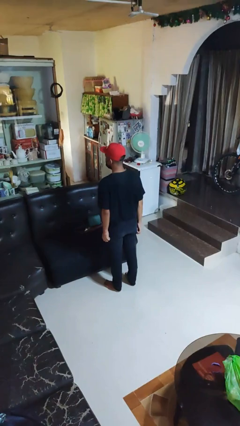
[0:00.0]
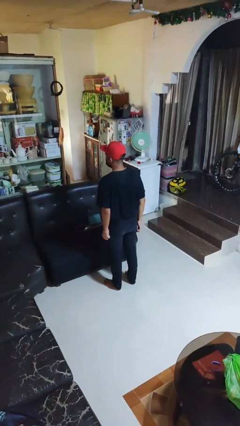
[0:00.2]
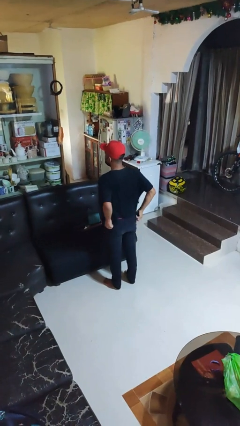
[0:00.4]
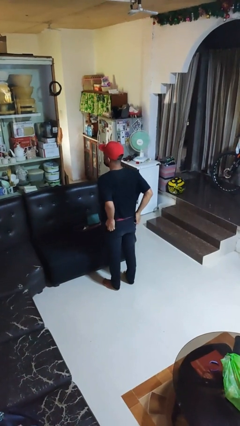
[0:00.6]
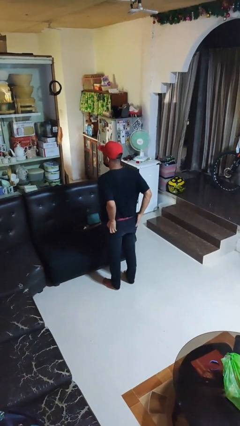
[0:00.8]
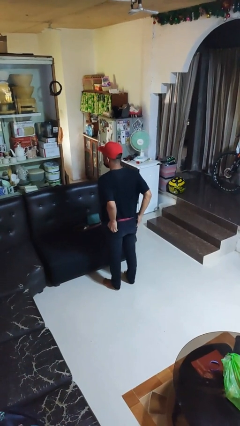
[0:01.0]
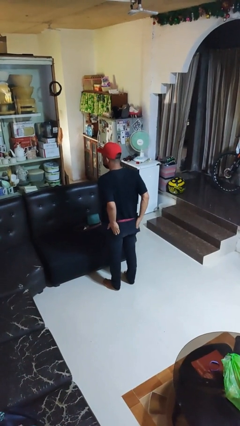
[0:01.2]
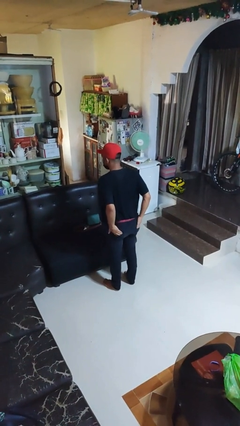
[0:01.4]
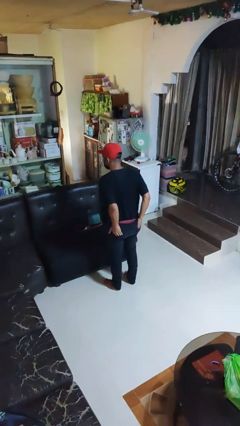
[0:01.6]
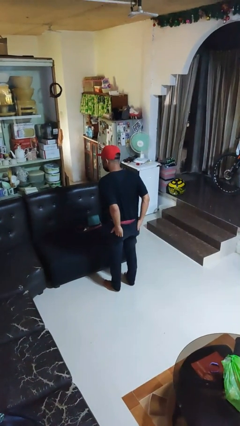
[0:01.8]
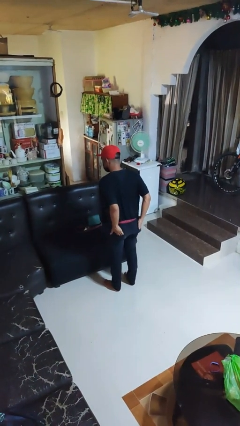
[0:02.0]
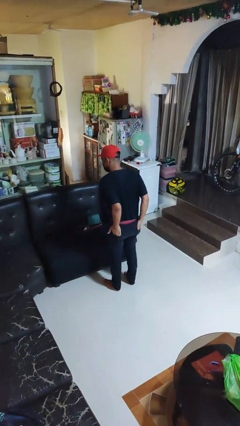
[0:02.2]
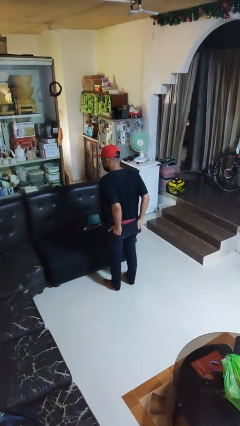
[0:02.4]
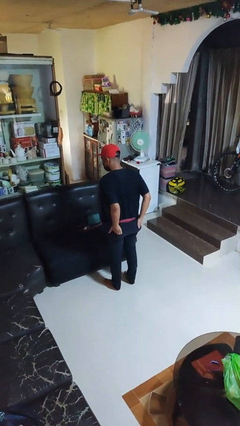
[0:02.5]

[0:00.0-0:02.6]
person puts hands in back pockets

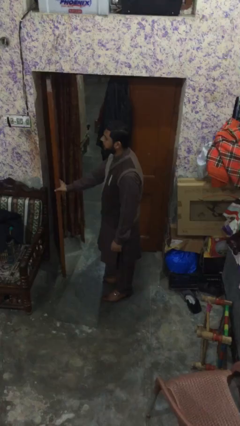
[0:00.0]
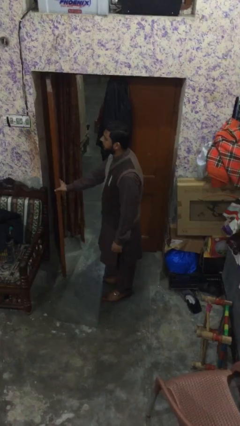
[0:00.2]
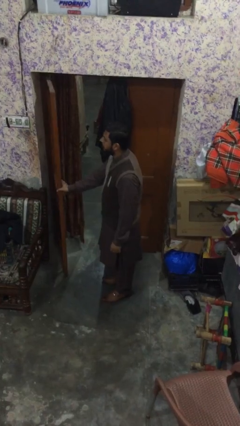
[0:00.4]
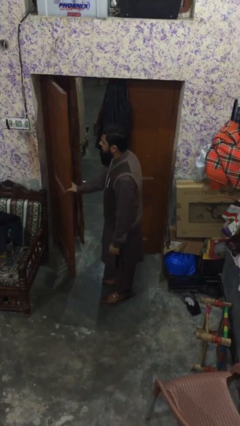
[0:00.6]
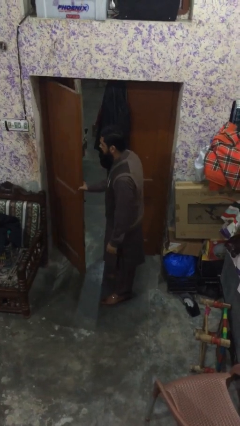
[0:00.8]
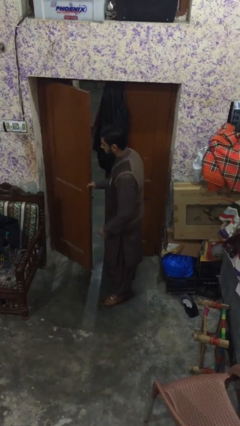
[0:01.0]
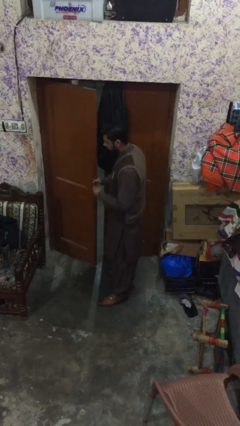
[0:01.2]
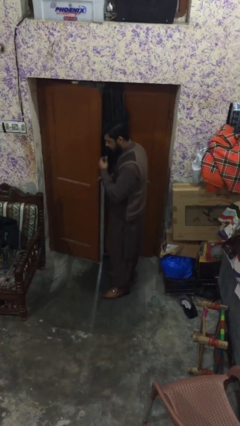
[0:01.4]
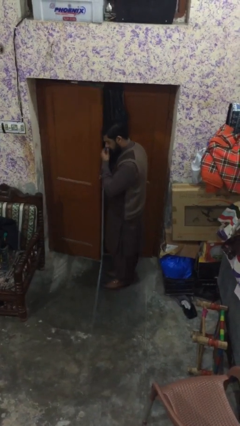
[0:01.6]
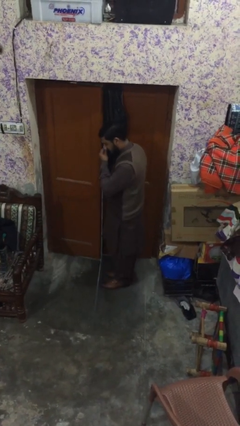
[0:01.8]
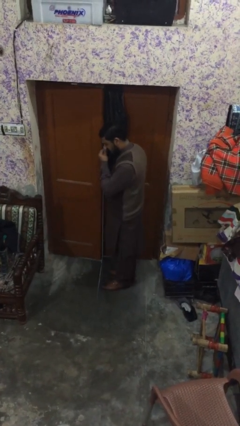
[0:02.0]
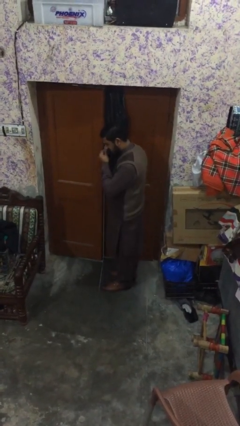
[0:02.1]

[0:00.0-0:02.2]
person closes facility door

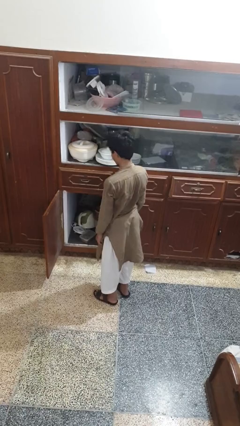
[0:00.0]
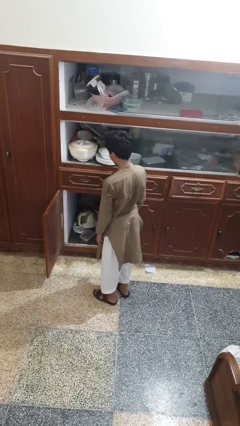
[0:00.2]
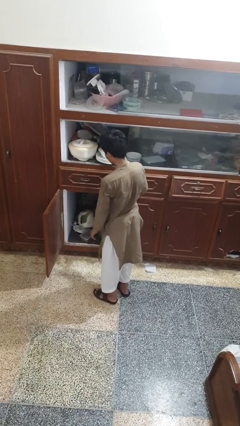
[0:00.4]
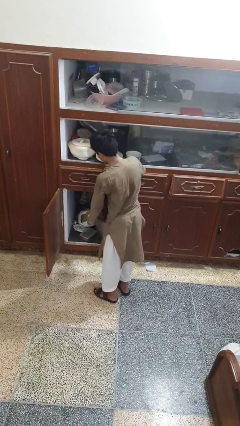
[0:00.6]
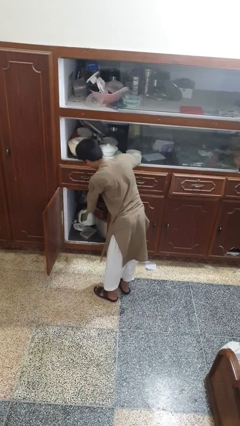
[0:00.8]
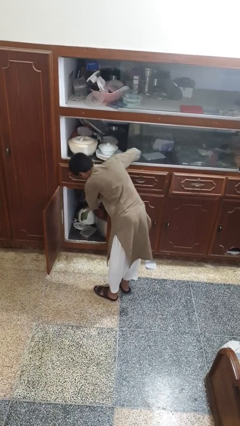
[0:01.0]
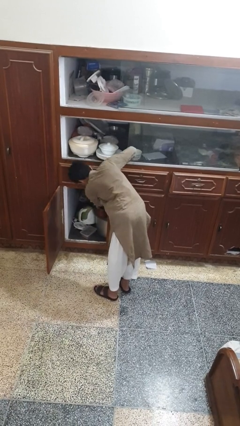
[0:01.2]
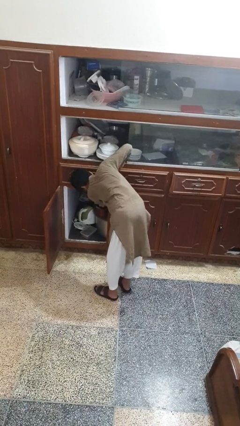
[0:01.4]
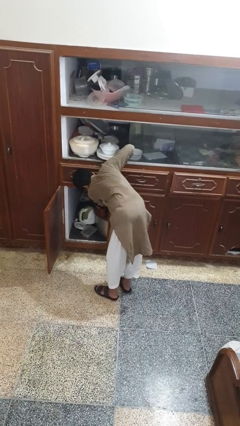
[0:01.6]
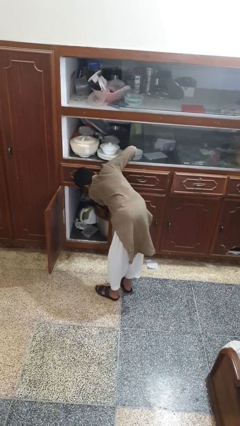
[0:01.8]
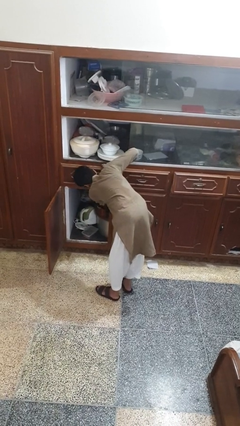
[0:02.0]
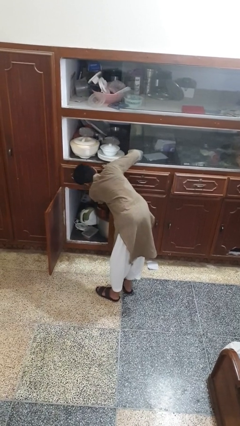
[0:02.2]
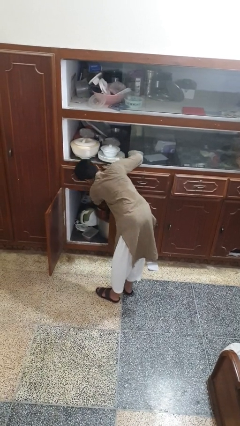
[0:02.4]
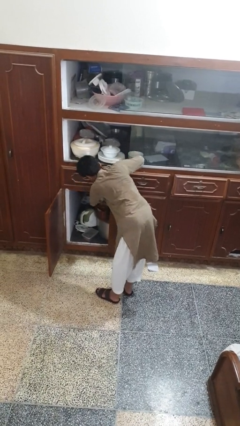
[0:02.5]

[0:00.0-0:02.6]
person takes object from cabinet

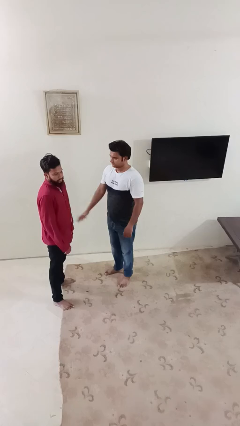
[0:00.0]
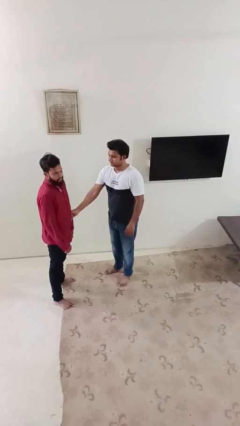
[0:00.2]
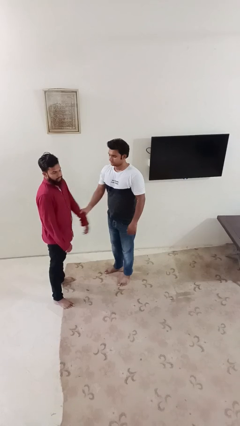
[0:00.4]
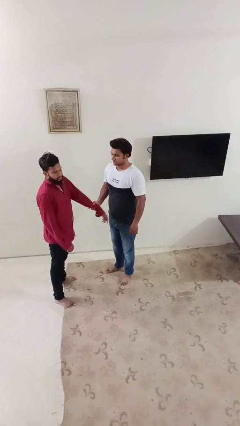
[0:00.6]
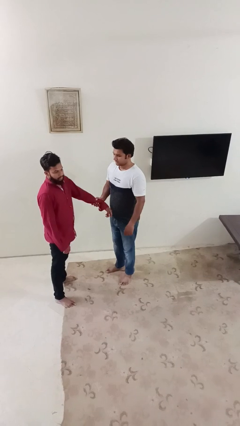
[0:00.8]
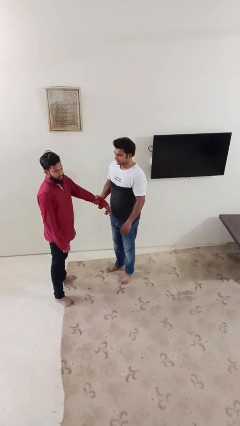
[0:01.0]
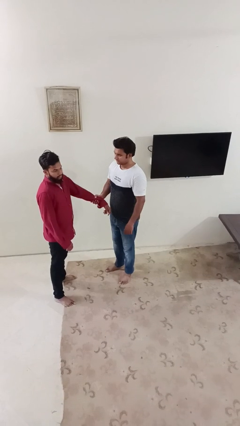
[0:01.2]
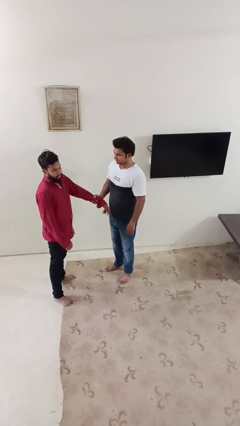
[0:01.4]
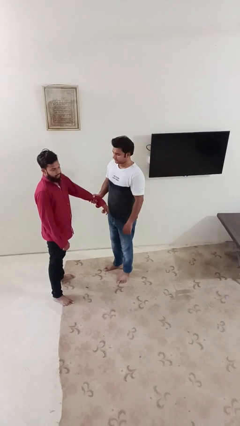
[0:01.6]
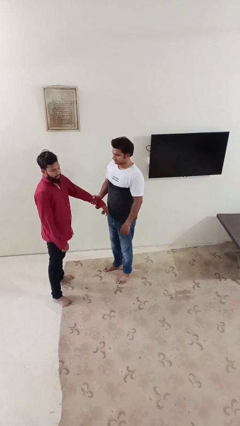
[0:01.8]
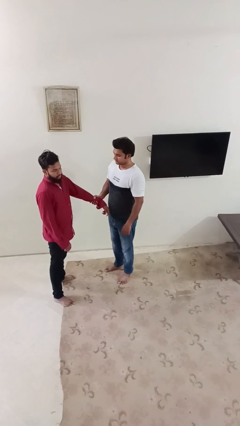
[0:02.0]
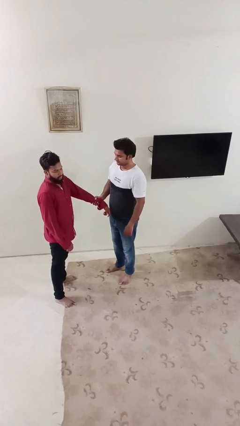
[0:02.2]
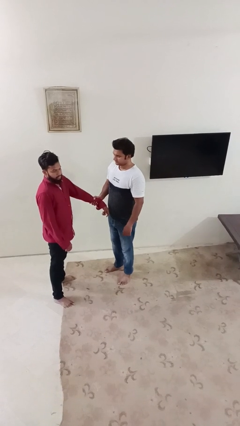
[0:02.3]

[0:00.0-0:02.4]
person grabs person by forearm

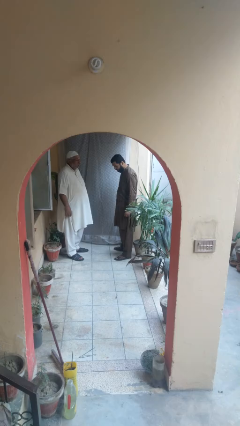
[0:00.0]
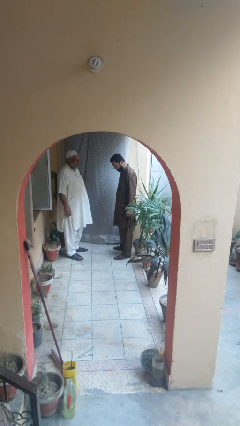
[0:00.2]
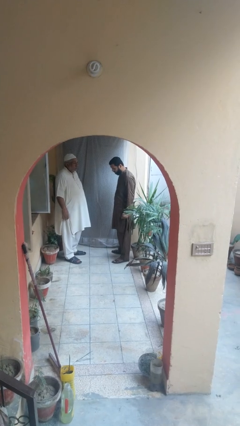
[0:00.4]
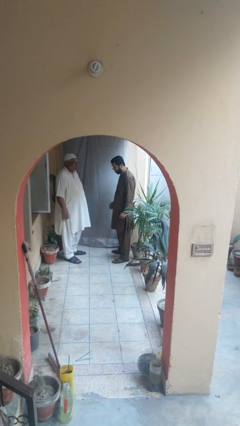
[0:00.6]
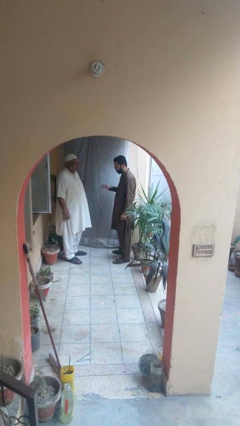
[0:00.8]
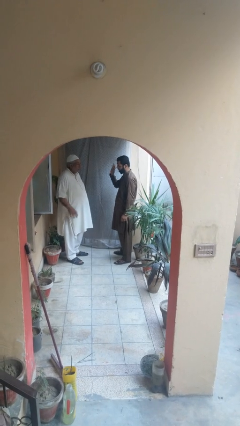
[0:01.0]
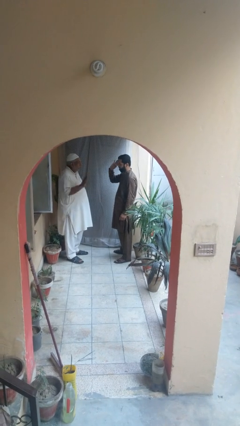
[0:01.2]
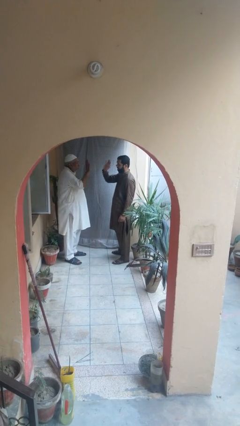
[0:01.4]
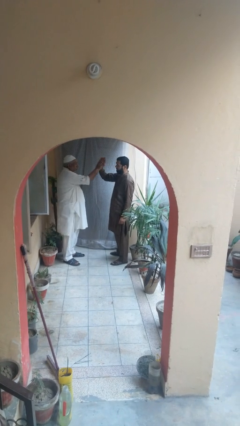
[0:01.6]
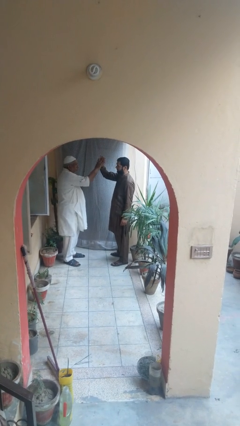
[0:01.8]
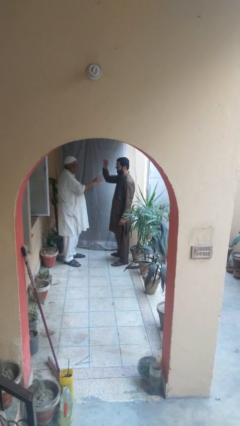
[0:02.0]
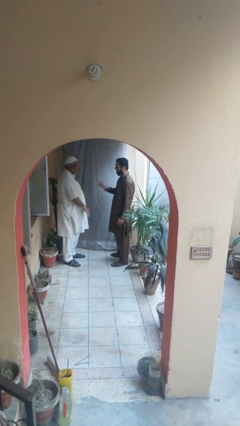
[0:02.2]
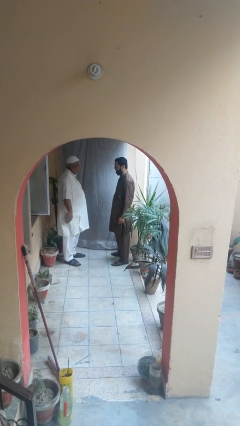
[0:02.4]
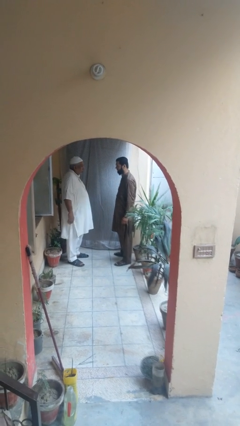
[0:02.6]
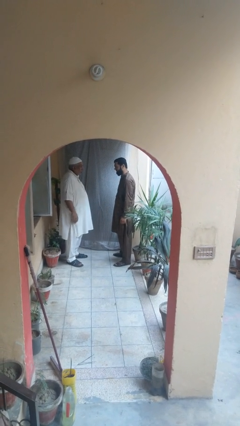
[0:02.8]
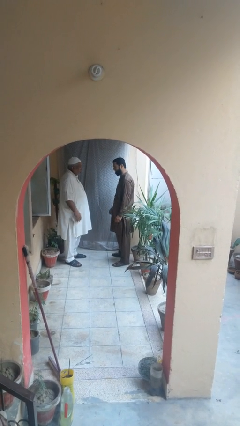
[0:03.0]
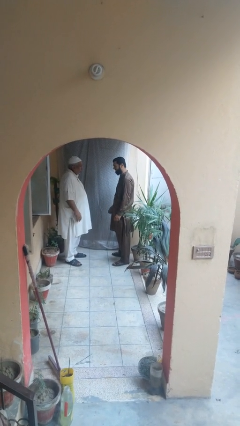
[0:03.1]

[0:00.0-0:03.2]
person highfives hand

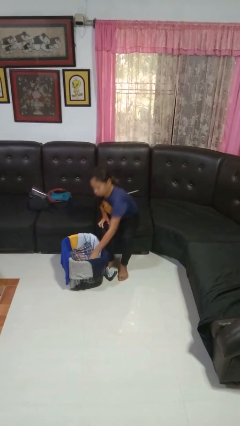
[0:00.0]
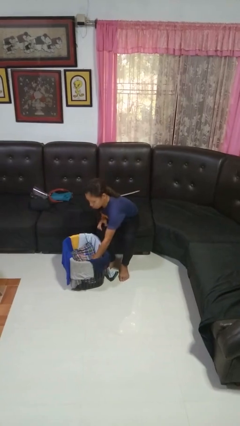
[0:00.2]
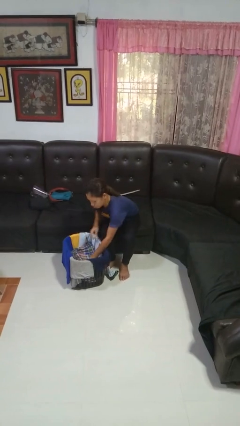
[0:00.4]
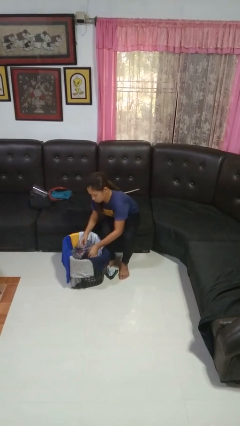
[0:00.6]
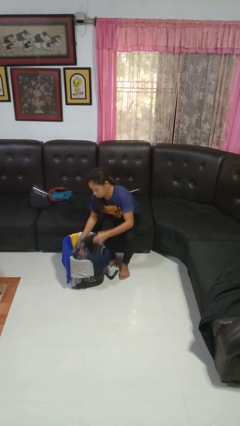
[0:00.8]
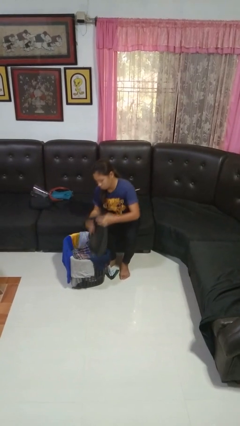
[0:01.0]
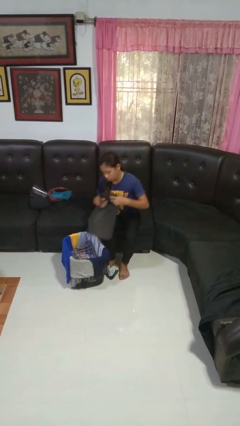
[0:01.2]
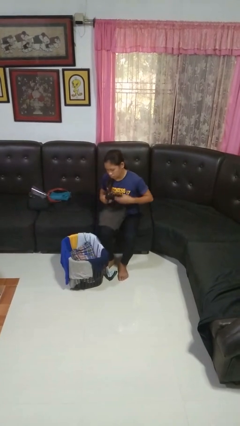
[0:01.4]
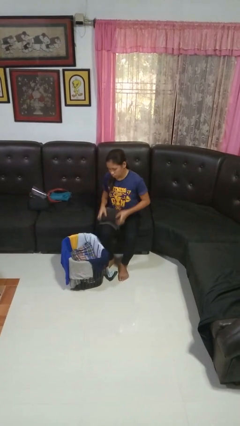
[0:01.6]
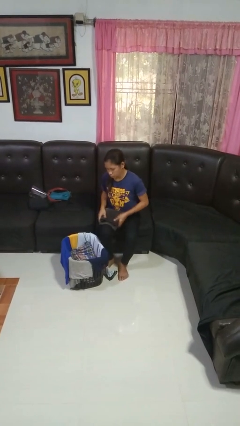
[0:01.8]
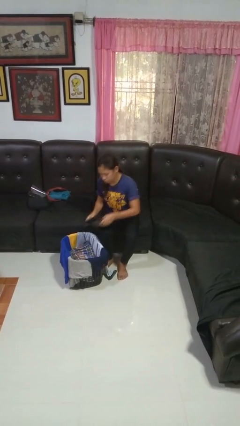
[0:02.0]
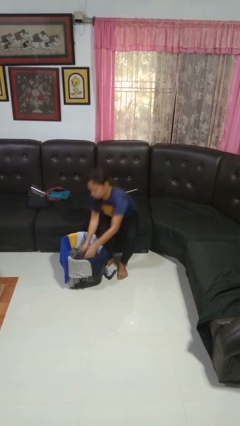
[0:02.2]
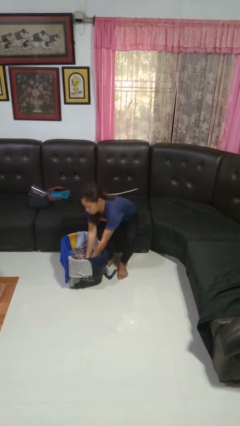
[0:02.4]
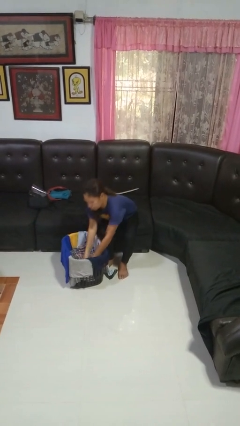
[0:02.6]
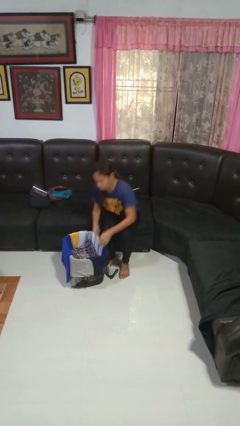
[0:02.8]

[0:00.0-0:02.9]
person folds pants

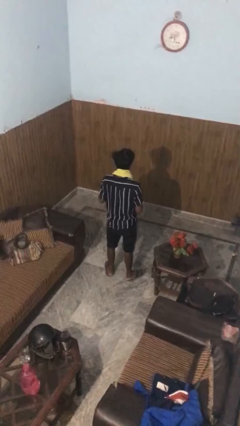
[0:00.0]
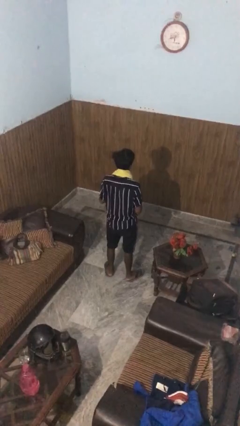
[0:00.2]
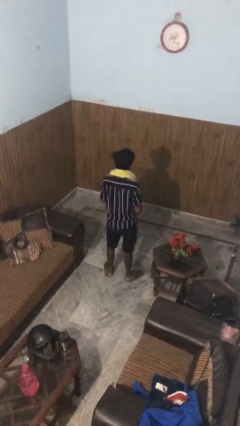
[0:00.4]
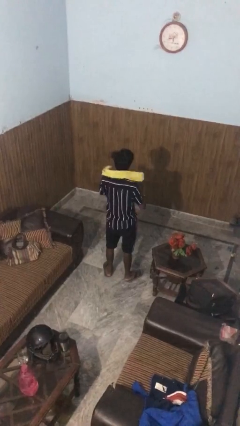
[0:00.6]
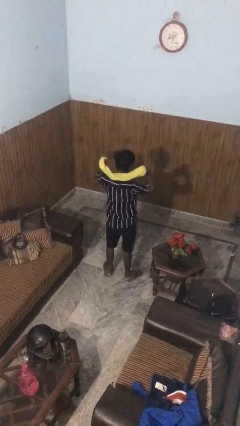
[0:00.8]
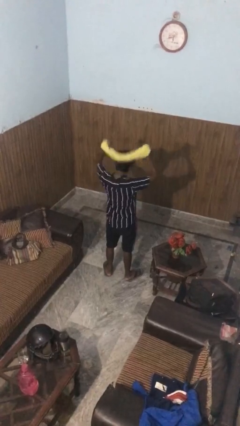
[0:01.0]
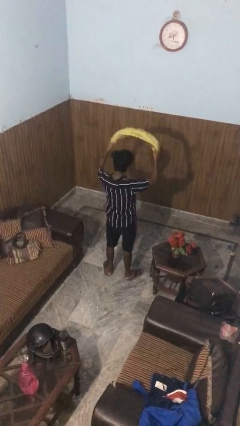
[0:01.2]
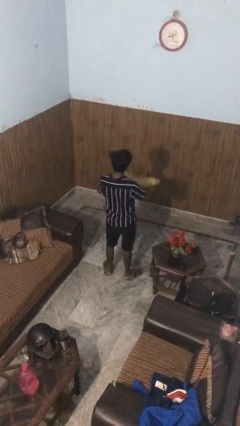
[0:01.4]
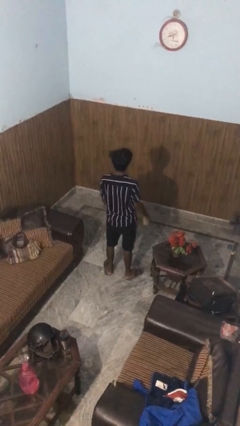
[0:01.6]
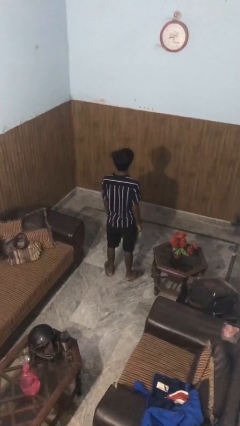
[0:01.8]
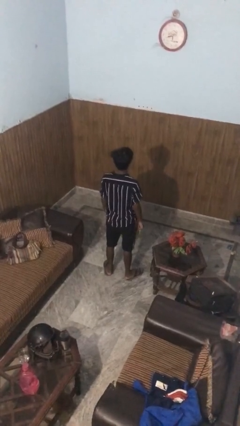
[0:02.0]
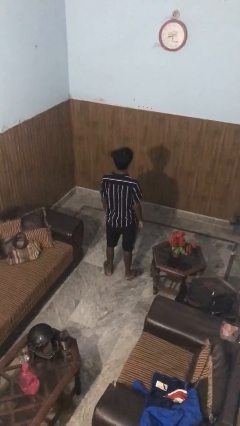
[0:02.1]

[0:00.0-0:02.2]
person takes off scarf
